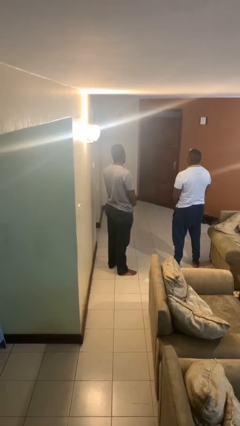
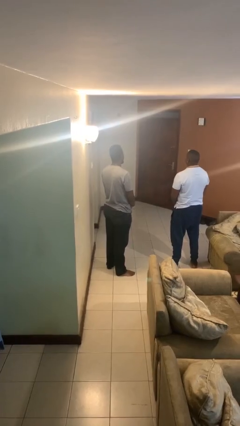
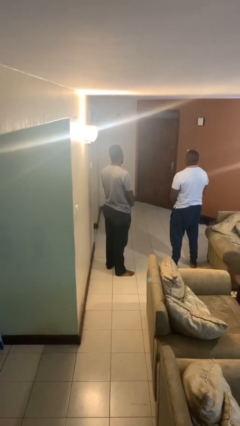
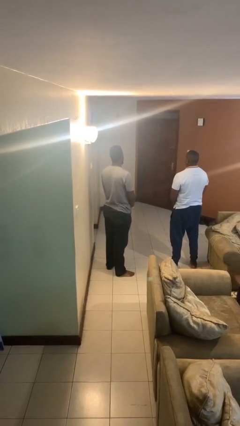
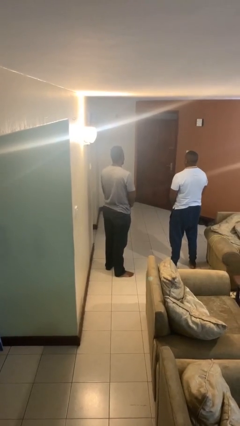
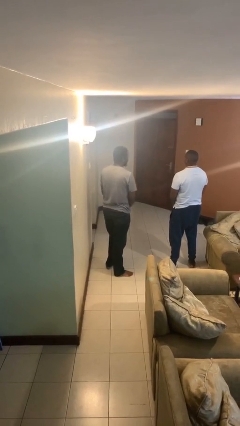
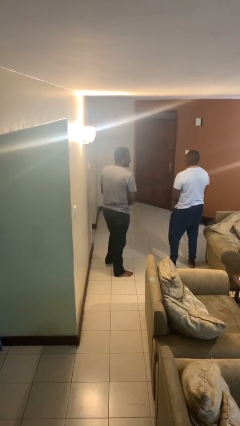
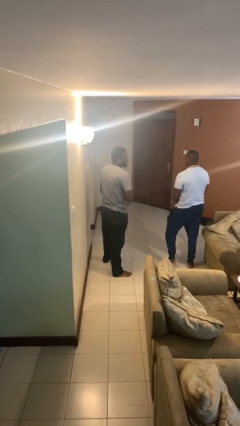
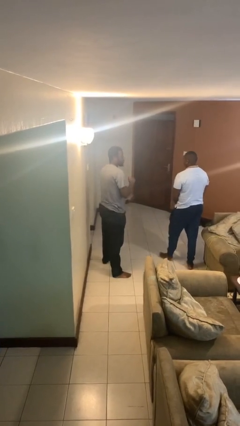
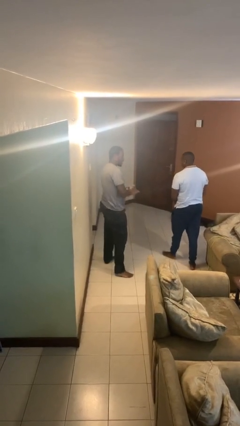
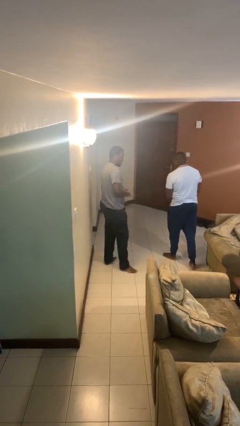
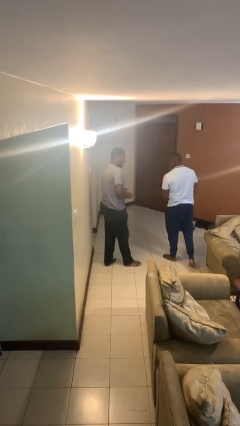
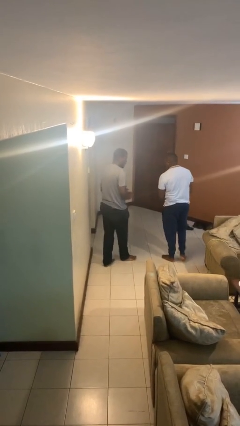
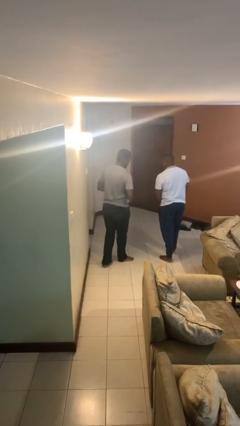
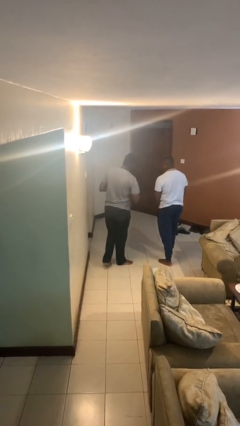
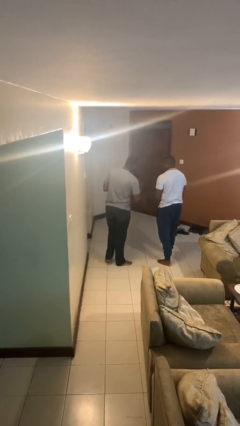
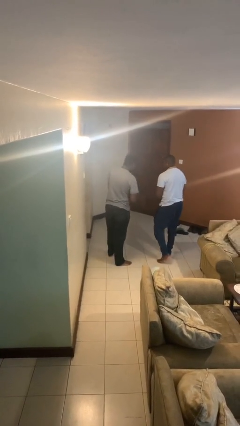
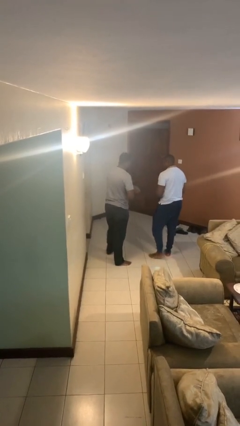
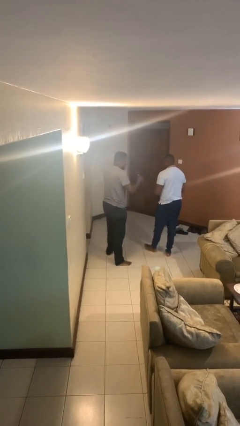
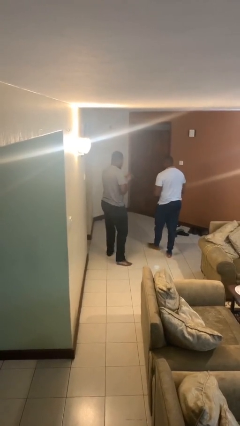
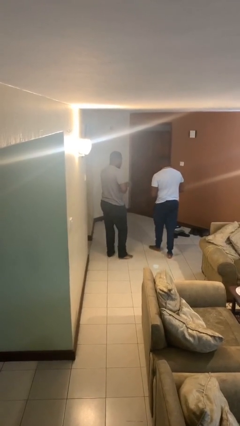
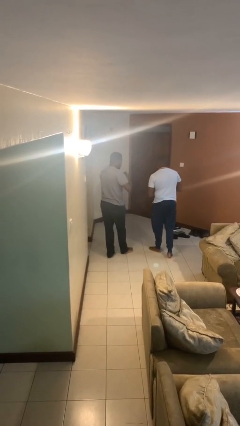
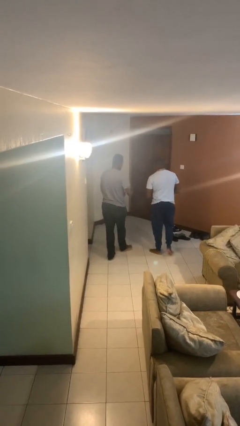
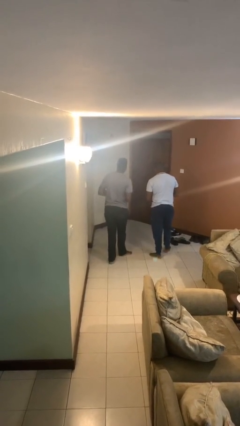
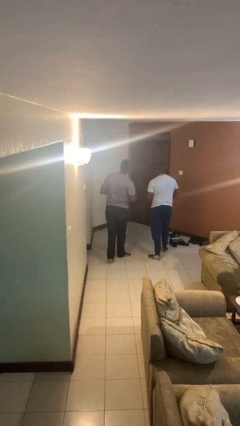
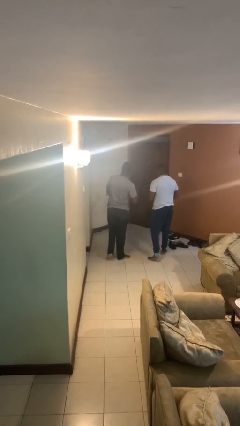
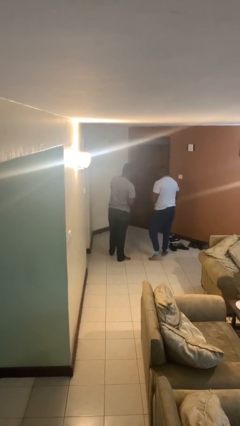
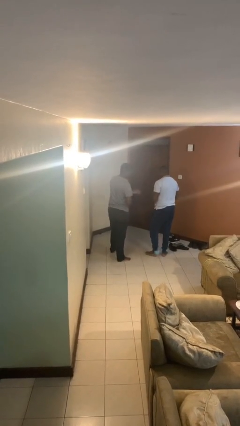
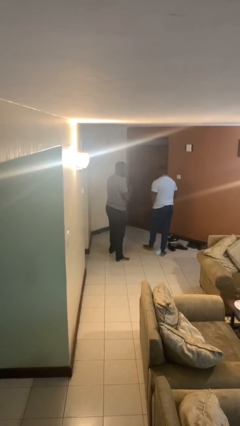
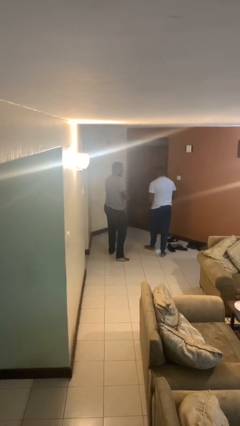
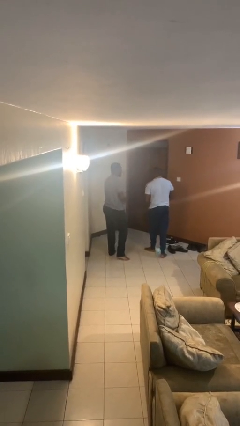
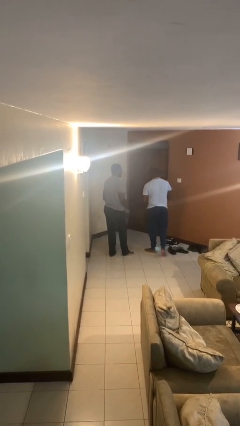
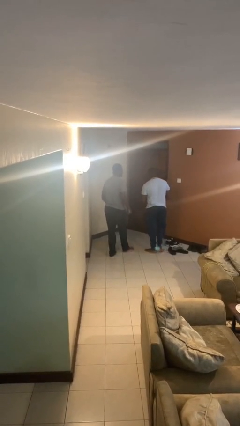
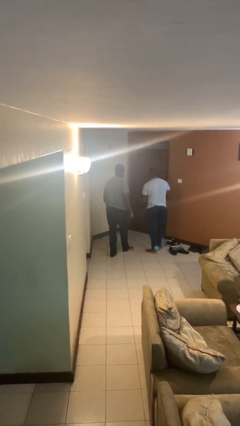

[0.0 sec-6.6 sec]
person talks to person

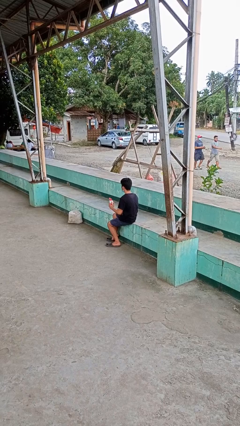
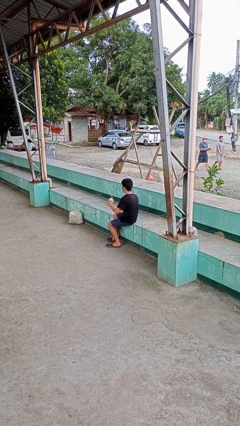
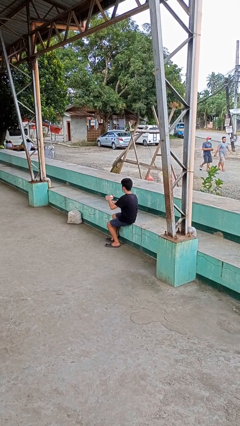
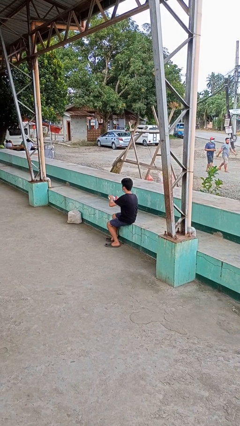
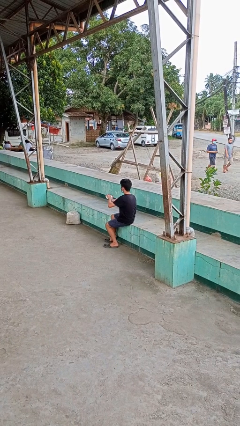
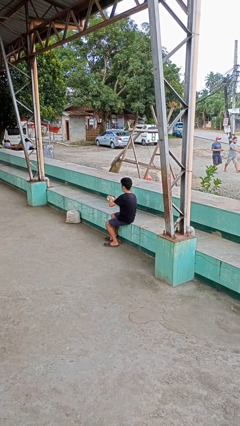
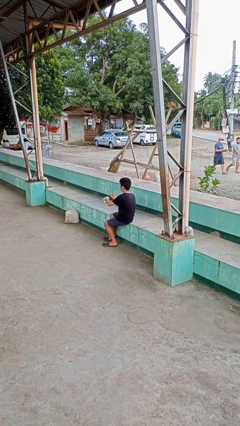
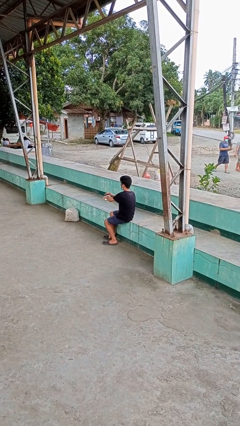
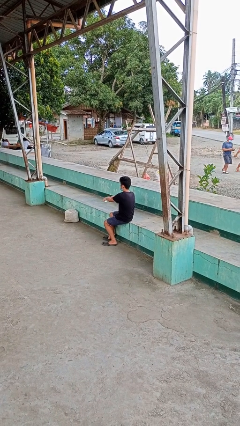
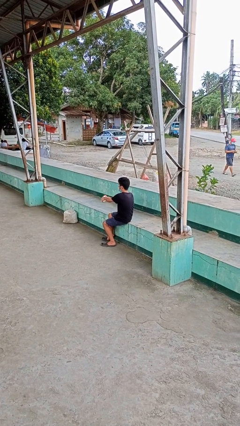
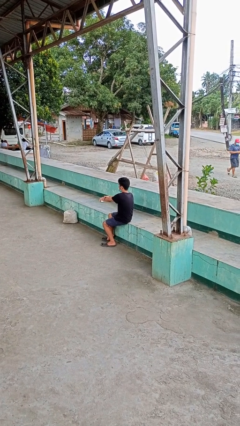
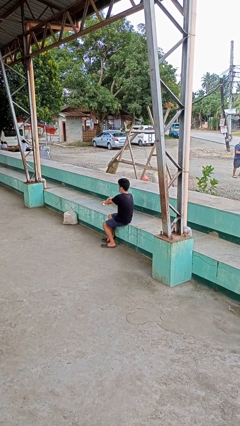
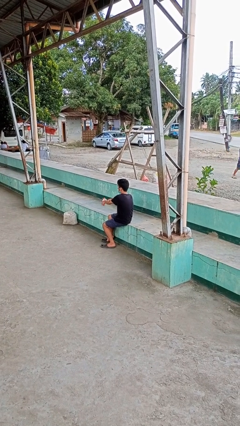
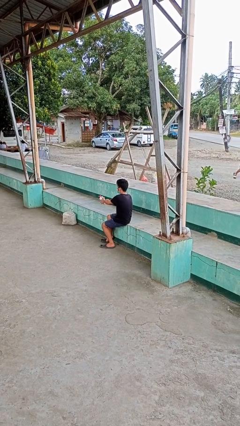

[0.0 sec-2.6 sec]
person applies sunscreen

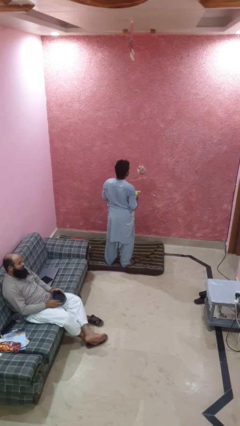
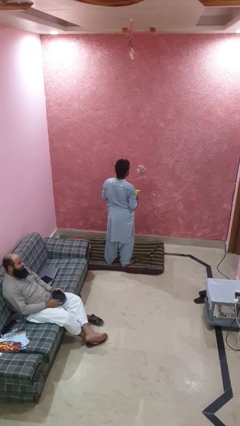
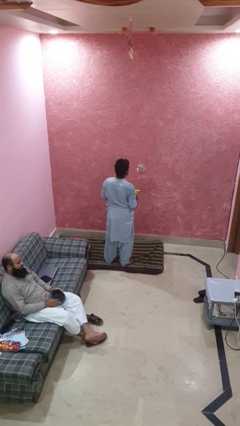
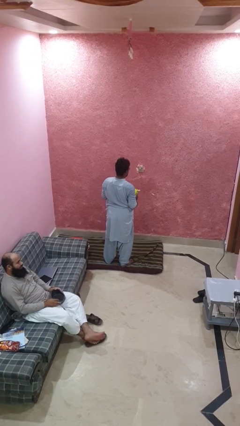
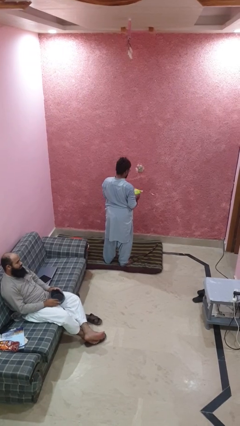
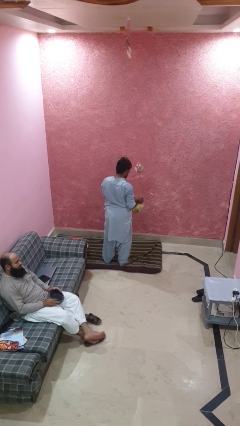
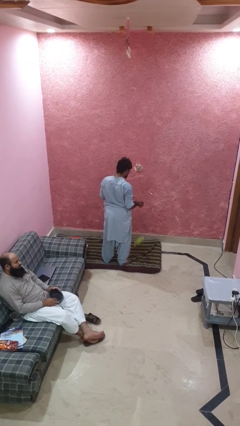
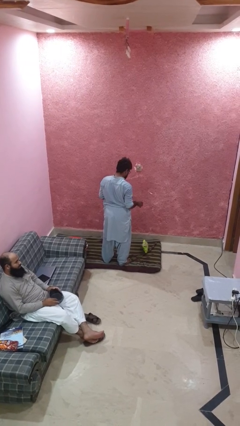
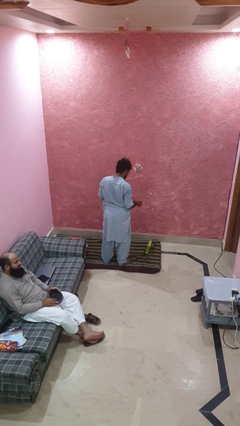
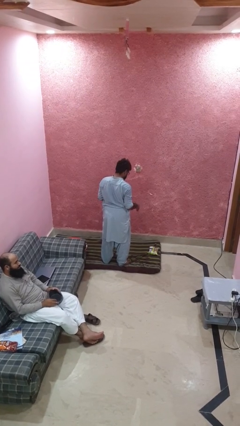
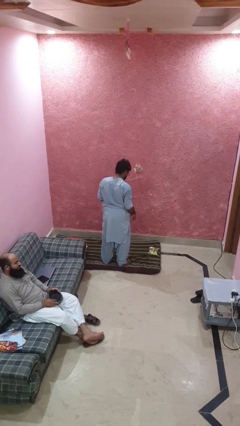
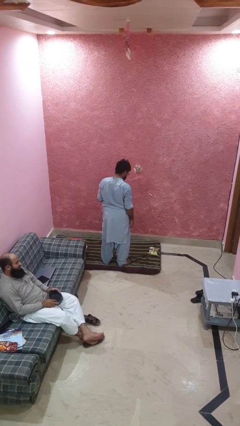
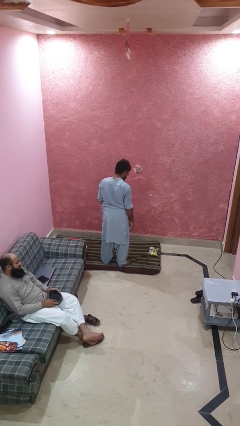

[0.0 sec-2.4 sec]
person drops object

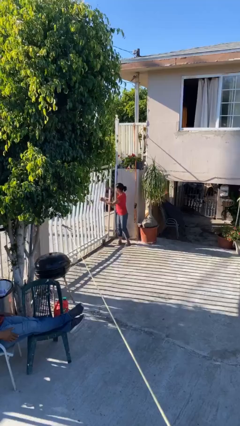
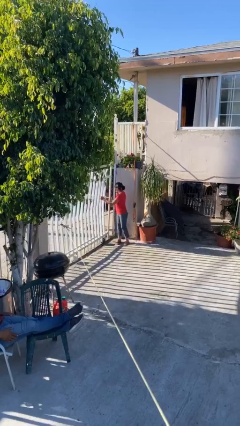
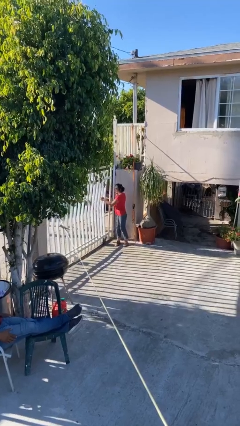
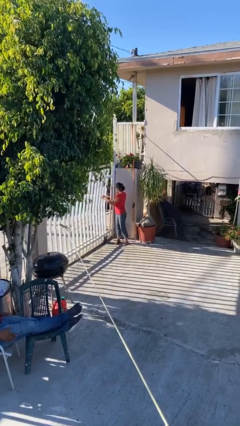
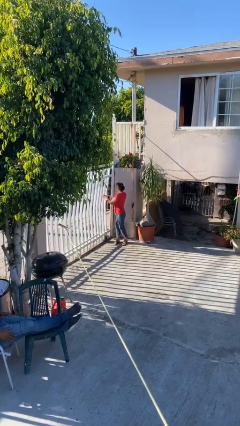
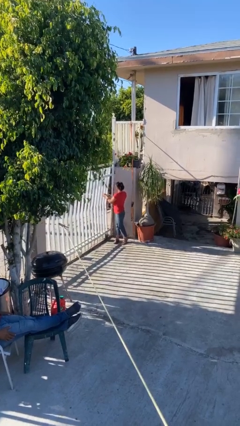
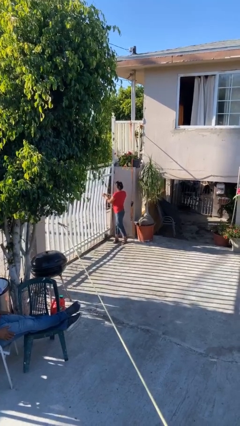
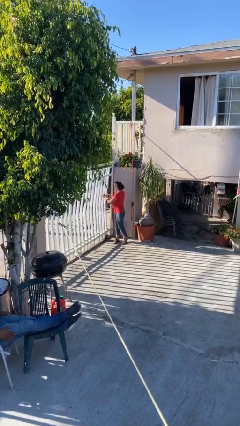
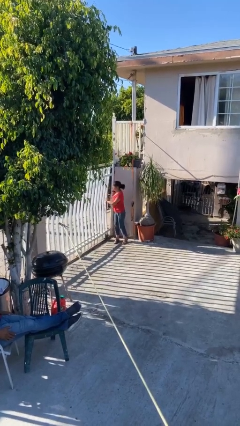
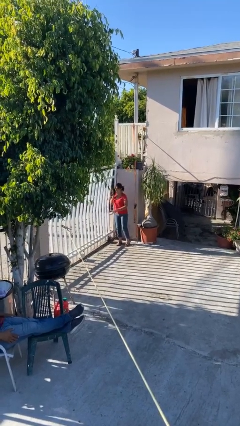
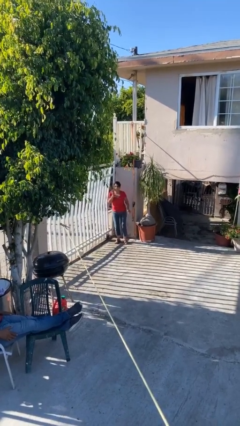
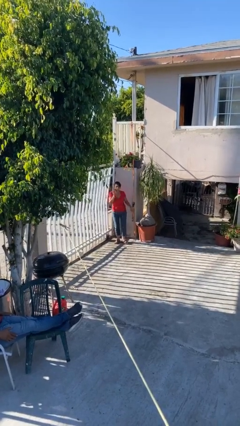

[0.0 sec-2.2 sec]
person closes facility door

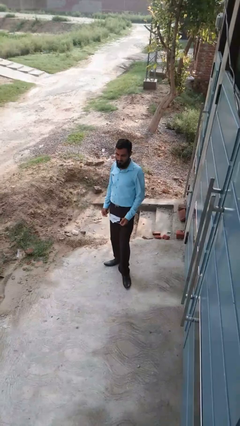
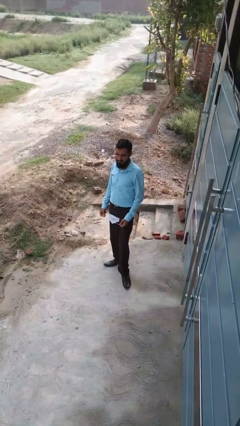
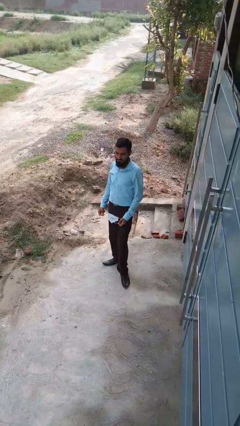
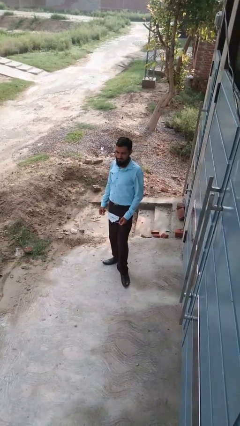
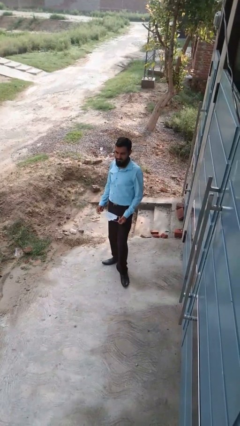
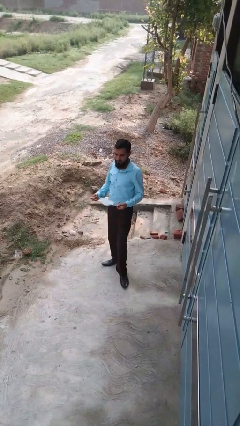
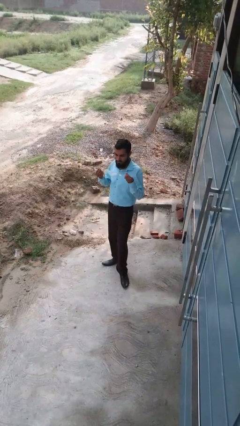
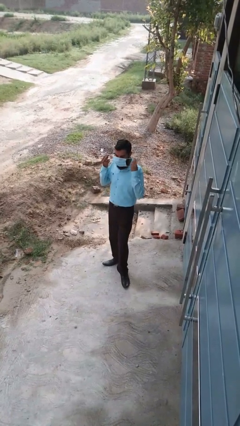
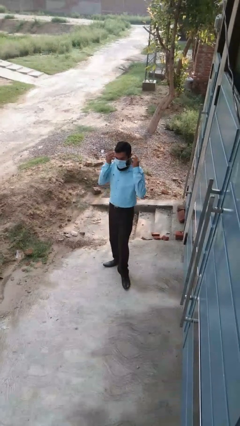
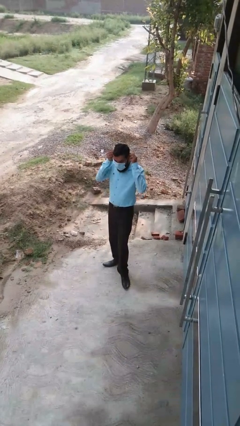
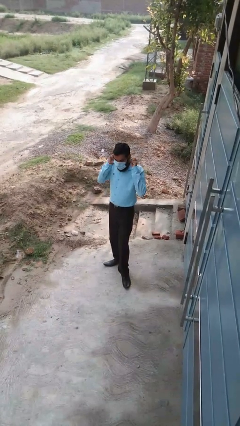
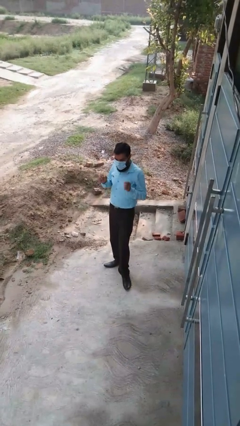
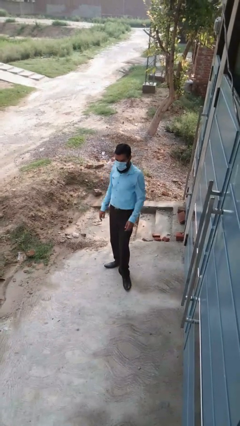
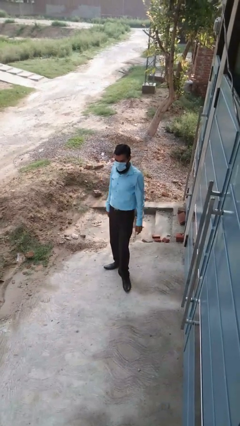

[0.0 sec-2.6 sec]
person puts on facemask

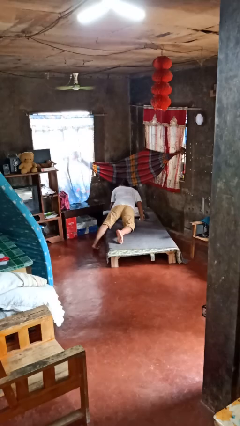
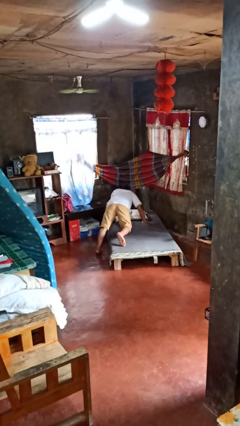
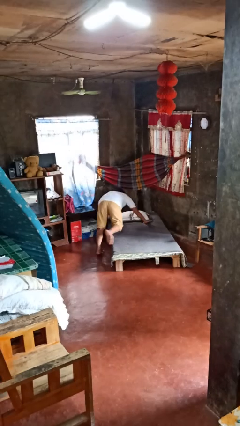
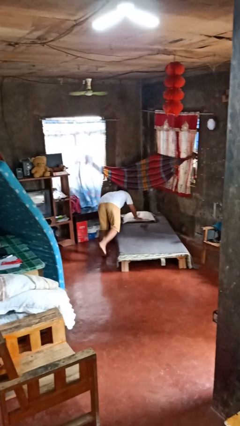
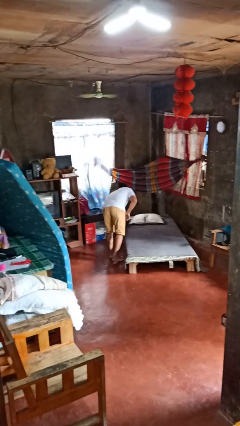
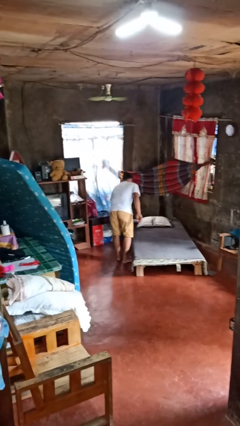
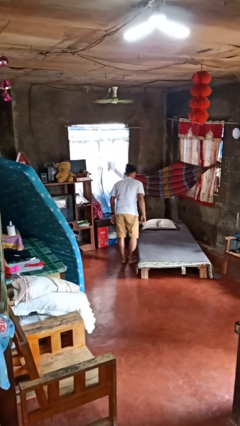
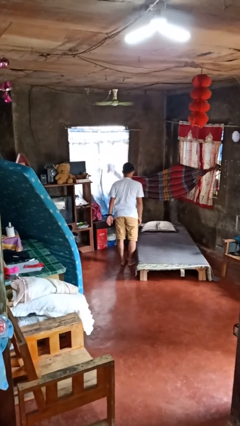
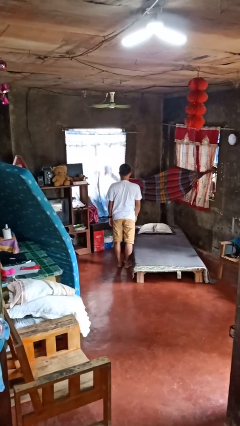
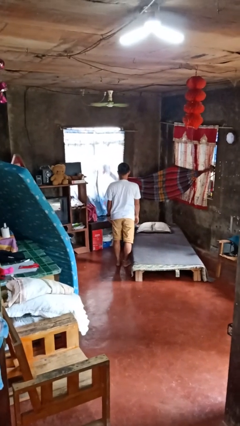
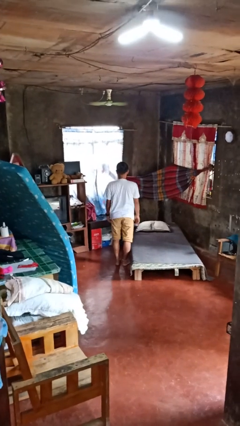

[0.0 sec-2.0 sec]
person stands up
